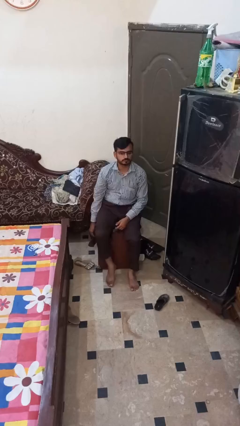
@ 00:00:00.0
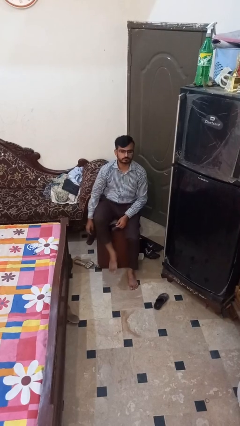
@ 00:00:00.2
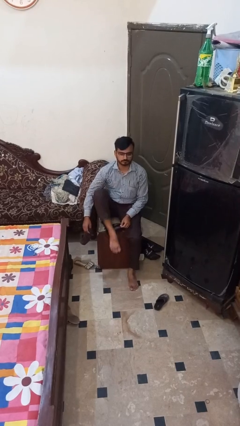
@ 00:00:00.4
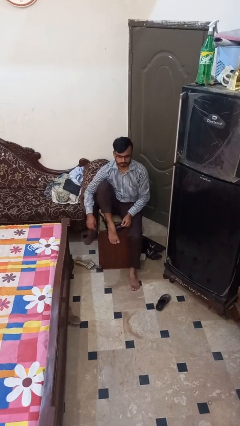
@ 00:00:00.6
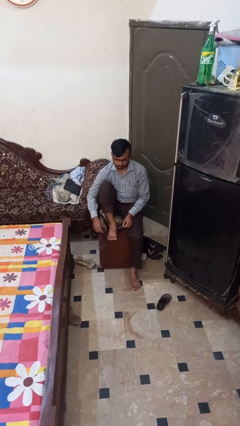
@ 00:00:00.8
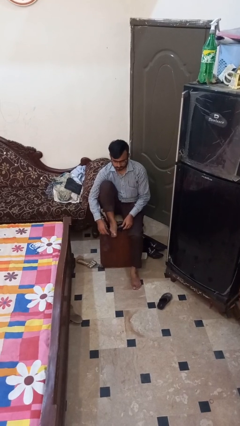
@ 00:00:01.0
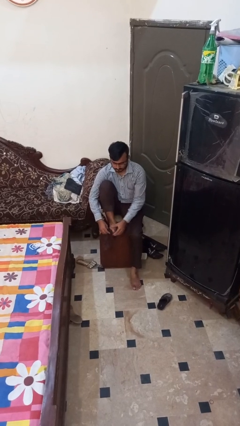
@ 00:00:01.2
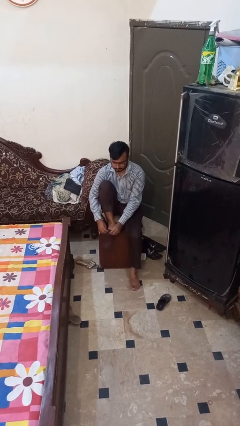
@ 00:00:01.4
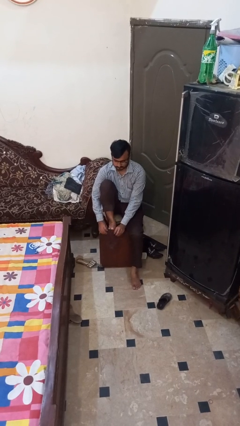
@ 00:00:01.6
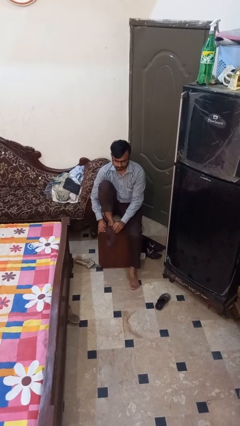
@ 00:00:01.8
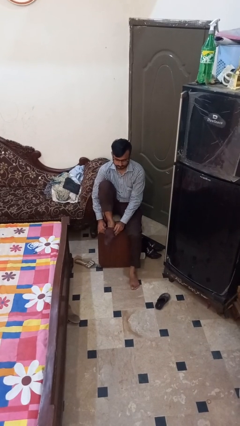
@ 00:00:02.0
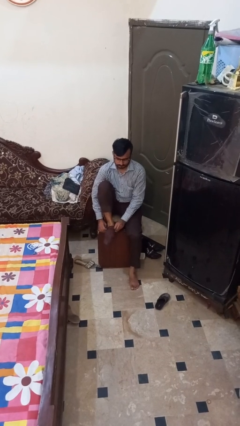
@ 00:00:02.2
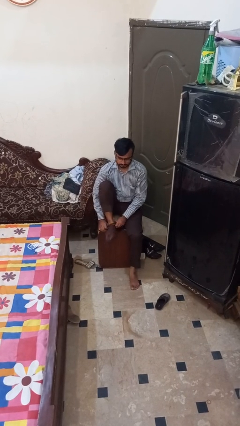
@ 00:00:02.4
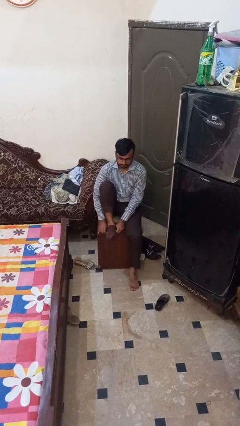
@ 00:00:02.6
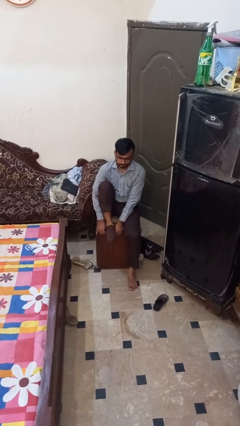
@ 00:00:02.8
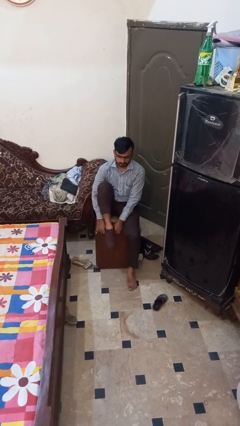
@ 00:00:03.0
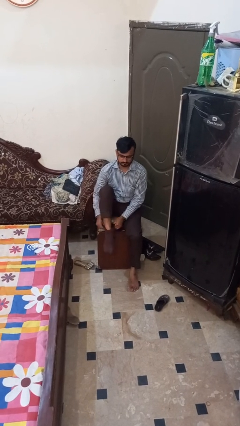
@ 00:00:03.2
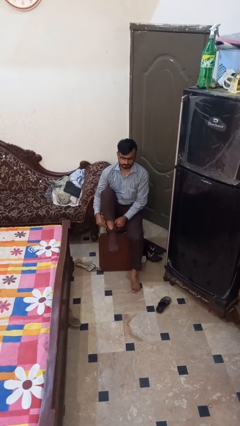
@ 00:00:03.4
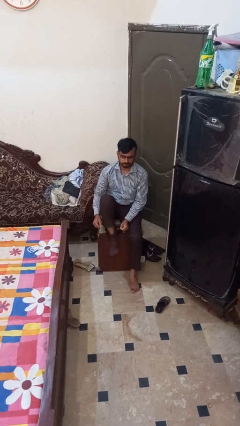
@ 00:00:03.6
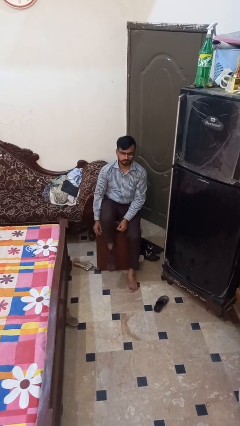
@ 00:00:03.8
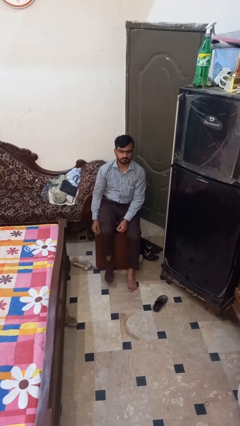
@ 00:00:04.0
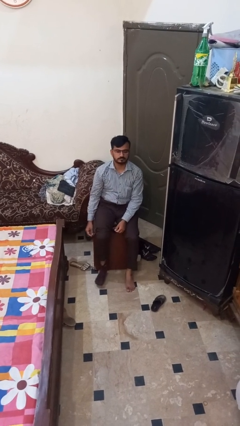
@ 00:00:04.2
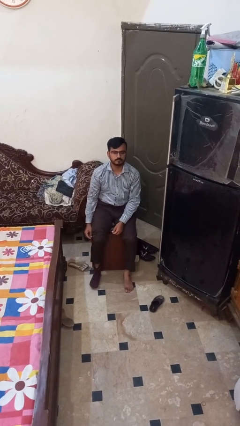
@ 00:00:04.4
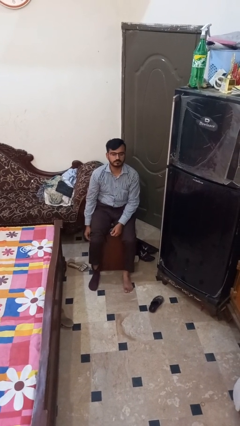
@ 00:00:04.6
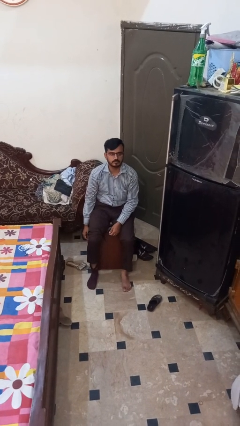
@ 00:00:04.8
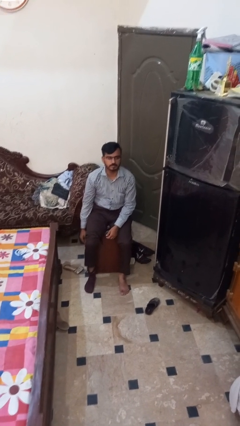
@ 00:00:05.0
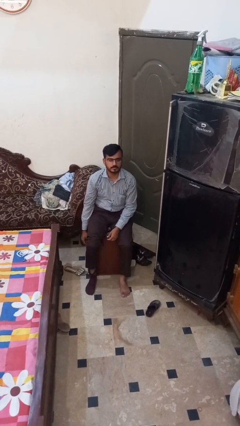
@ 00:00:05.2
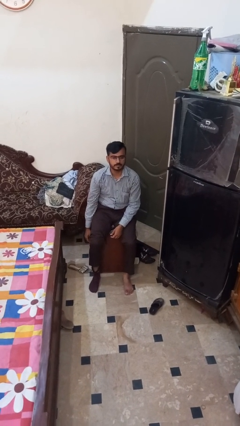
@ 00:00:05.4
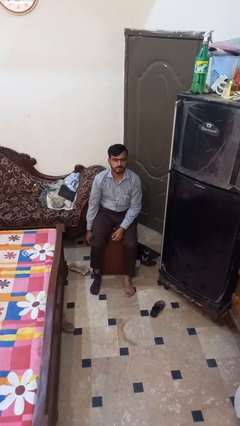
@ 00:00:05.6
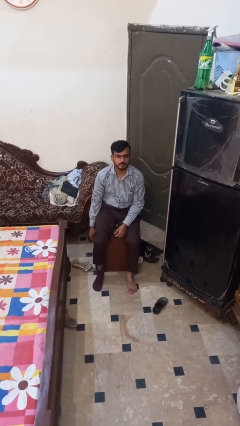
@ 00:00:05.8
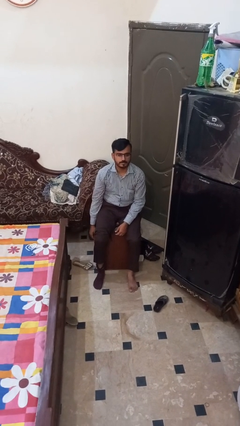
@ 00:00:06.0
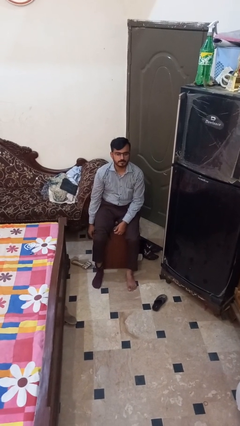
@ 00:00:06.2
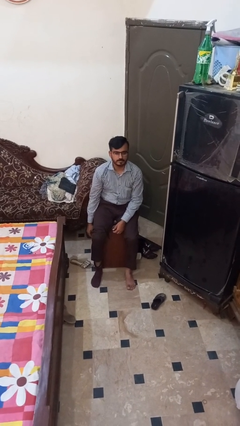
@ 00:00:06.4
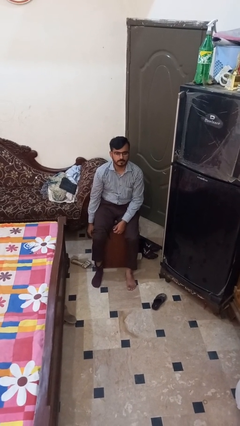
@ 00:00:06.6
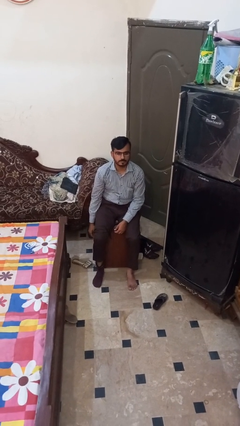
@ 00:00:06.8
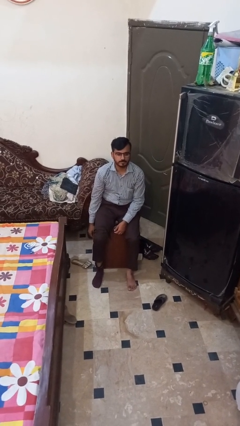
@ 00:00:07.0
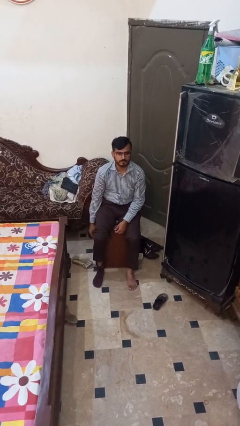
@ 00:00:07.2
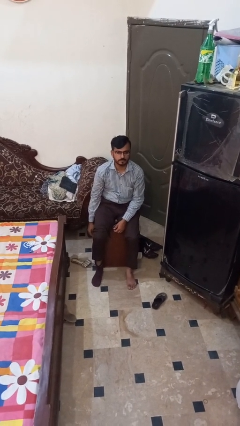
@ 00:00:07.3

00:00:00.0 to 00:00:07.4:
person puts on socks

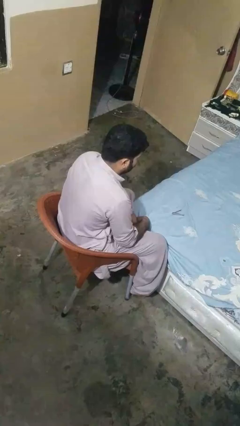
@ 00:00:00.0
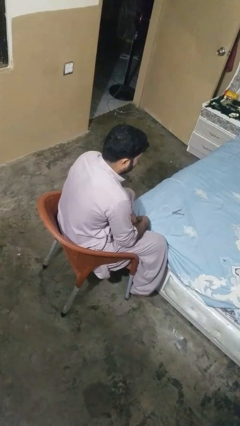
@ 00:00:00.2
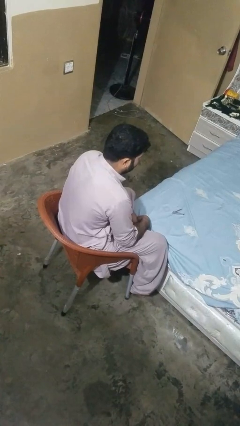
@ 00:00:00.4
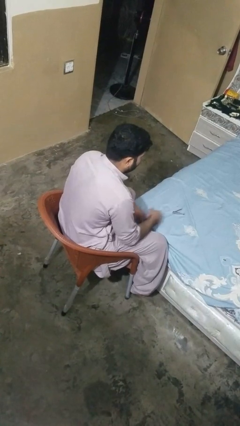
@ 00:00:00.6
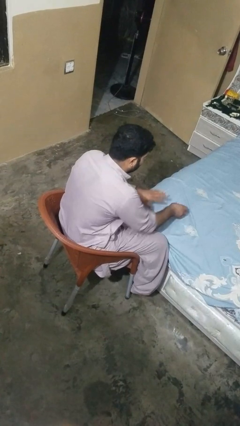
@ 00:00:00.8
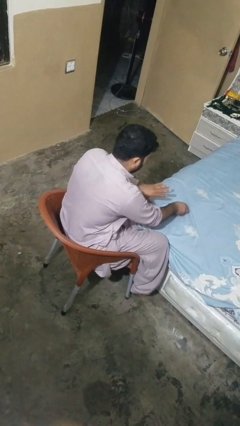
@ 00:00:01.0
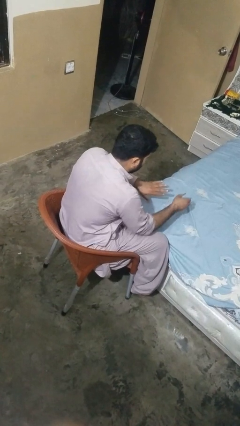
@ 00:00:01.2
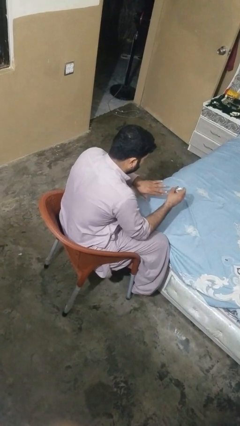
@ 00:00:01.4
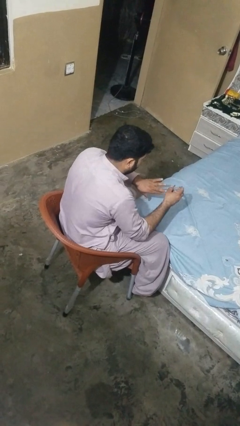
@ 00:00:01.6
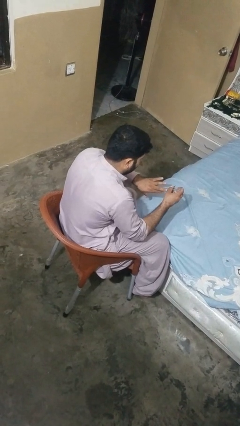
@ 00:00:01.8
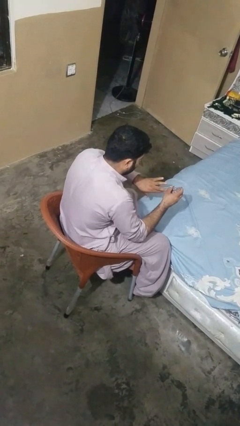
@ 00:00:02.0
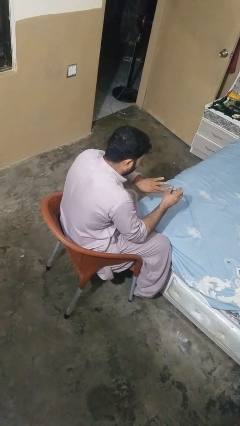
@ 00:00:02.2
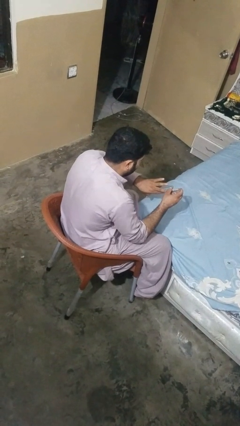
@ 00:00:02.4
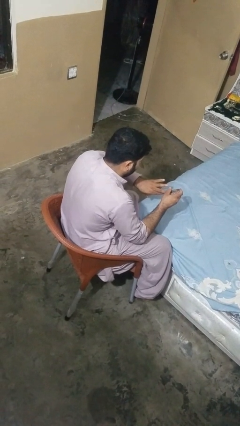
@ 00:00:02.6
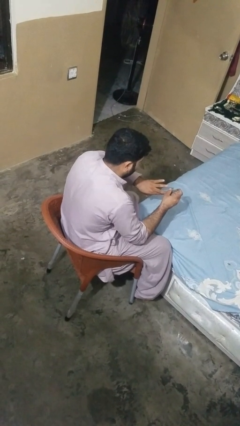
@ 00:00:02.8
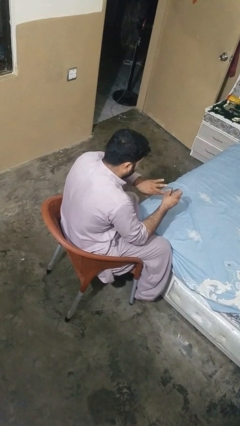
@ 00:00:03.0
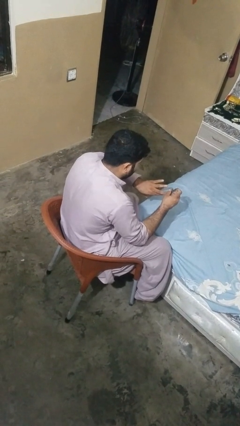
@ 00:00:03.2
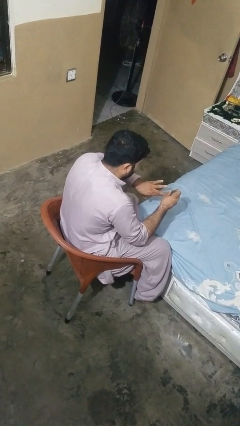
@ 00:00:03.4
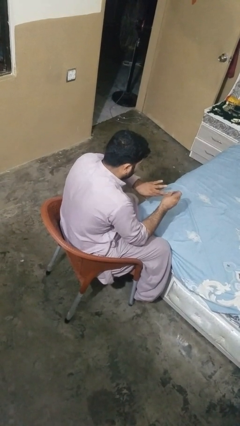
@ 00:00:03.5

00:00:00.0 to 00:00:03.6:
person clips fingernails

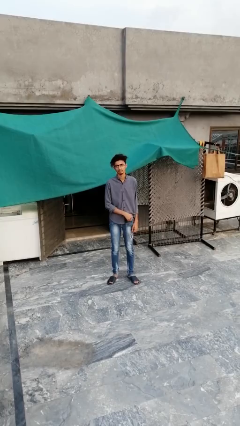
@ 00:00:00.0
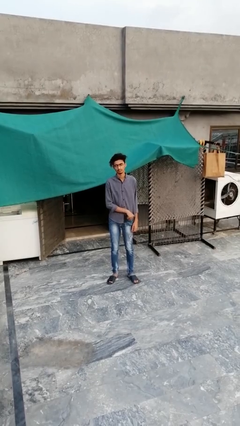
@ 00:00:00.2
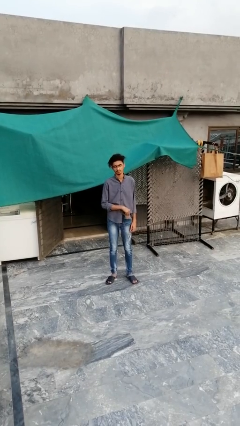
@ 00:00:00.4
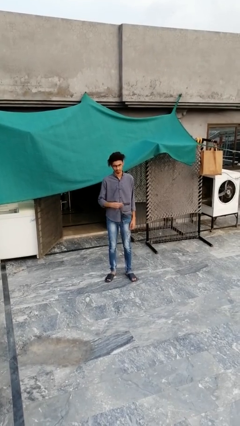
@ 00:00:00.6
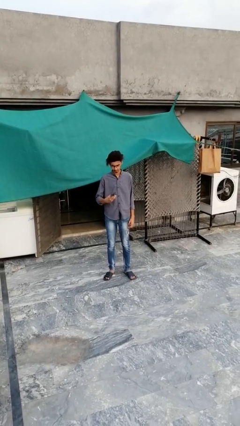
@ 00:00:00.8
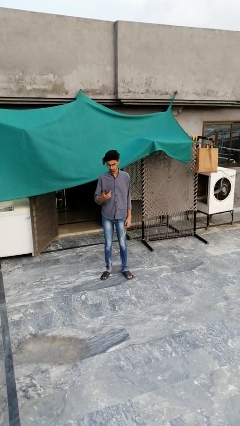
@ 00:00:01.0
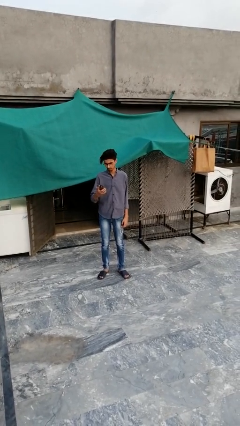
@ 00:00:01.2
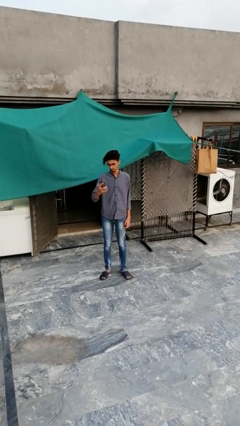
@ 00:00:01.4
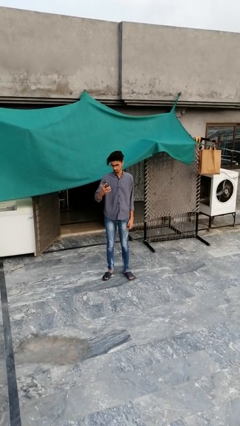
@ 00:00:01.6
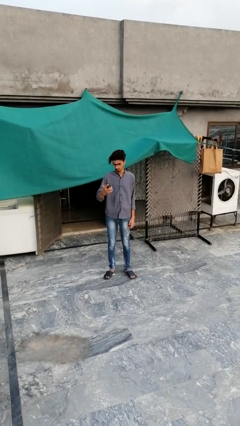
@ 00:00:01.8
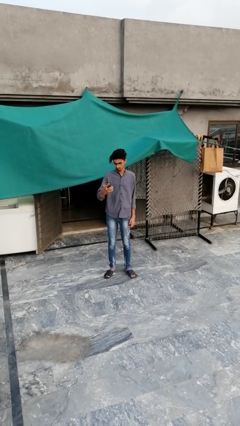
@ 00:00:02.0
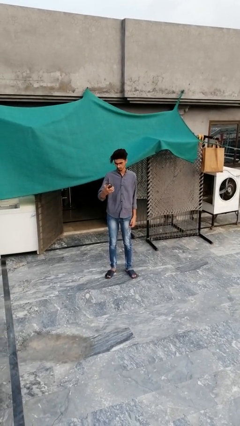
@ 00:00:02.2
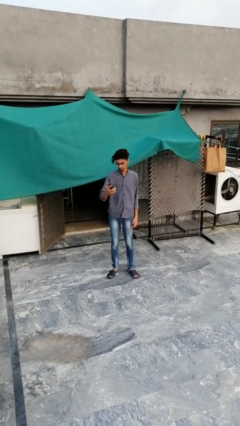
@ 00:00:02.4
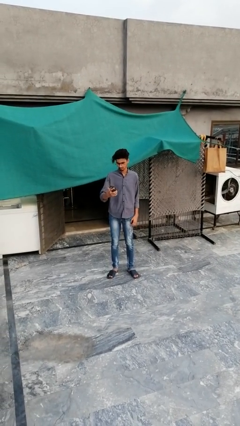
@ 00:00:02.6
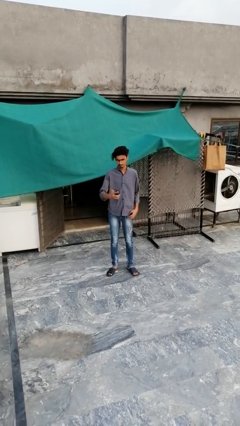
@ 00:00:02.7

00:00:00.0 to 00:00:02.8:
person takes phone from pocket

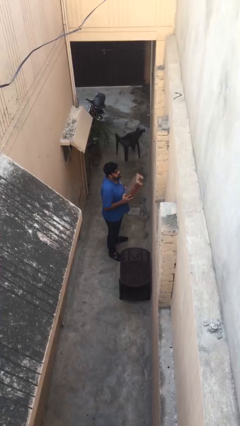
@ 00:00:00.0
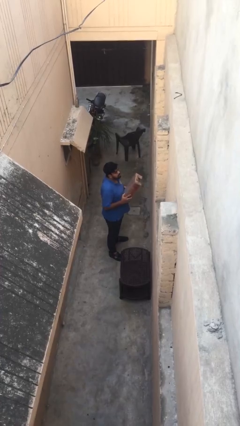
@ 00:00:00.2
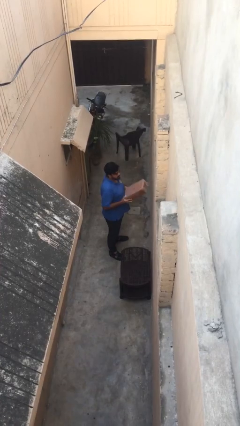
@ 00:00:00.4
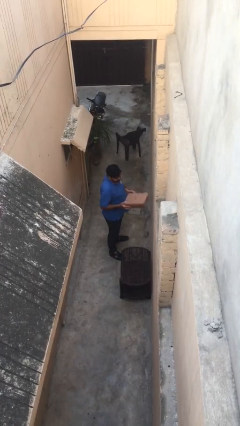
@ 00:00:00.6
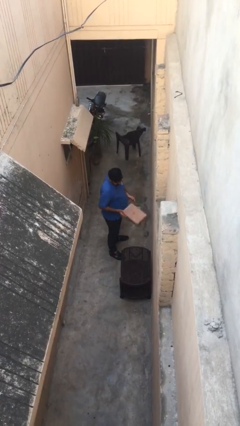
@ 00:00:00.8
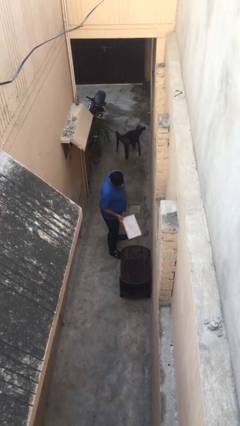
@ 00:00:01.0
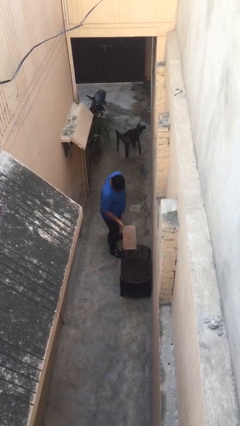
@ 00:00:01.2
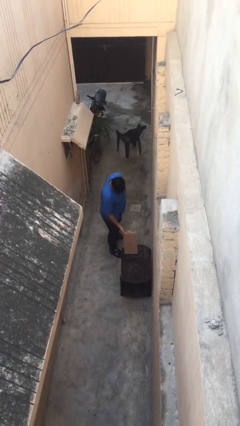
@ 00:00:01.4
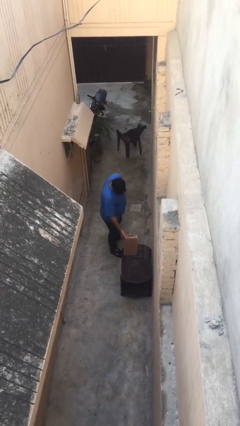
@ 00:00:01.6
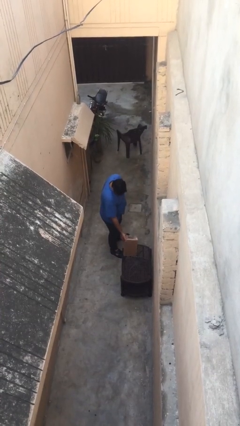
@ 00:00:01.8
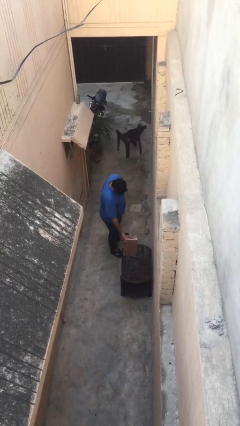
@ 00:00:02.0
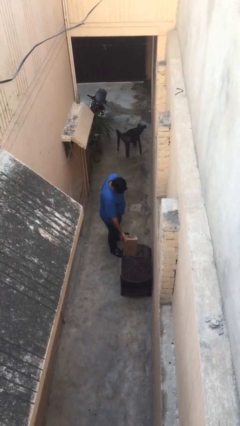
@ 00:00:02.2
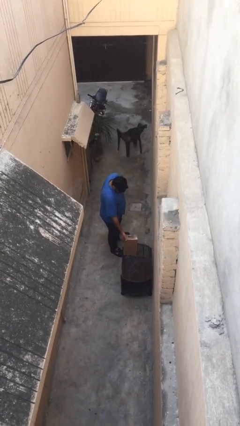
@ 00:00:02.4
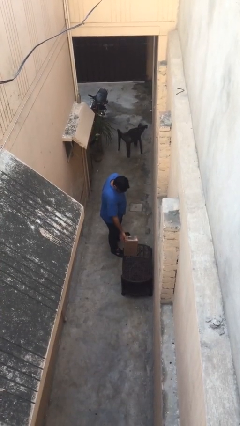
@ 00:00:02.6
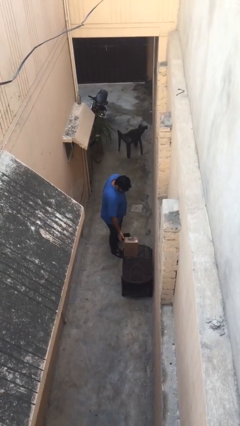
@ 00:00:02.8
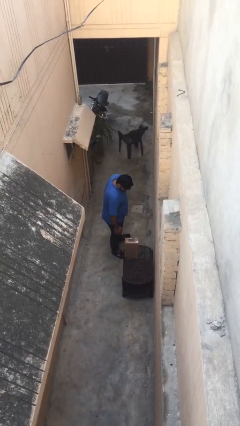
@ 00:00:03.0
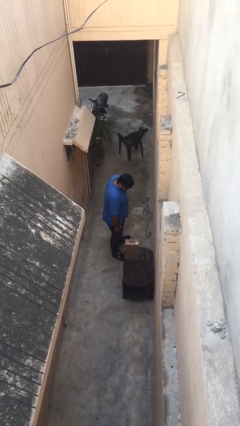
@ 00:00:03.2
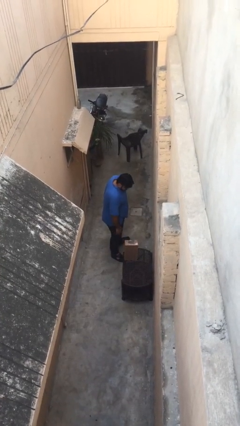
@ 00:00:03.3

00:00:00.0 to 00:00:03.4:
person puts down object on table
